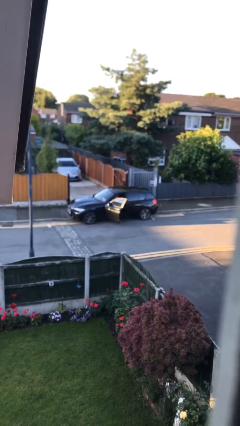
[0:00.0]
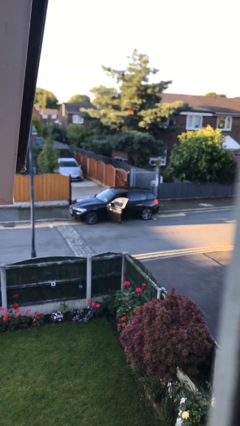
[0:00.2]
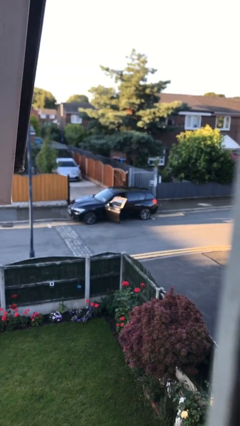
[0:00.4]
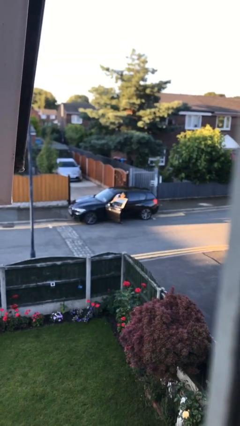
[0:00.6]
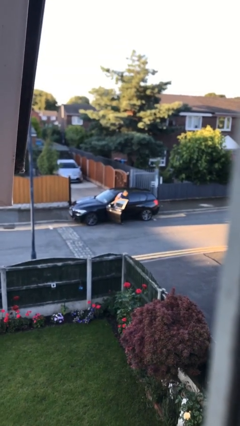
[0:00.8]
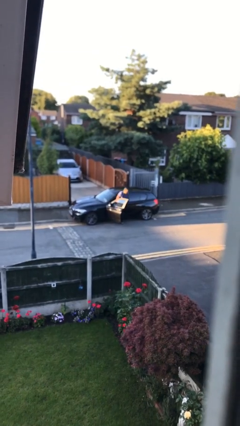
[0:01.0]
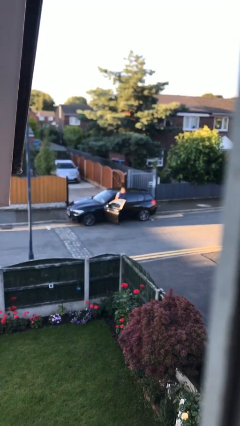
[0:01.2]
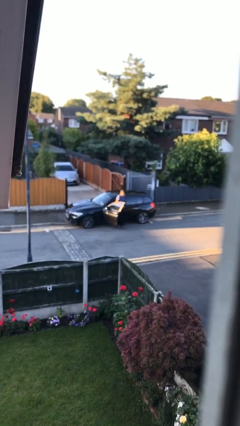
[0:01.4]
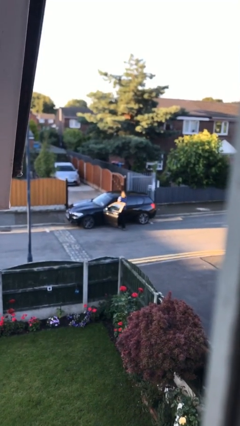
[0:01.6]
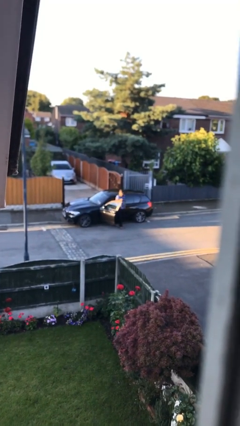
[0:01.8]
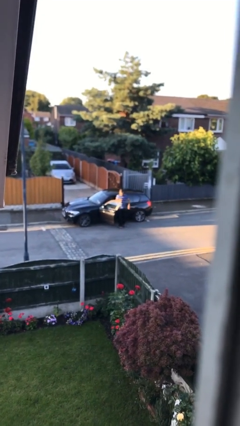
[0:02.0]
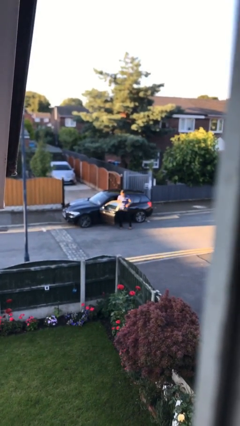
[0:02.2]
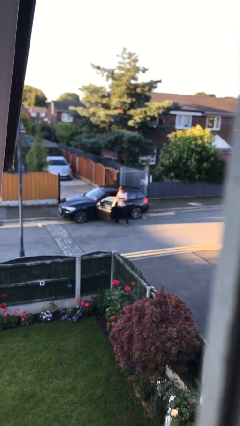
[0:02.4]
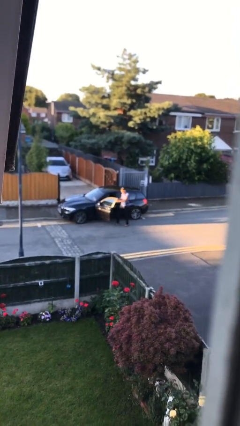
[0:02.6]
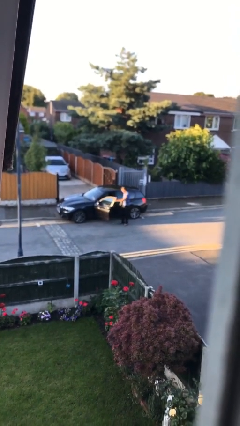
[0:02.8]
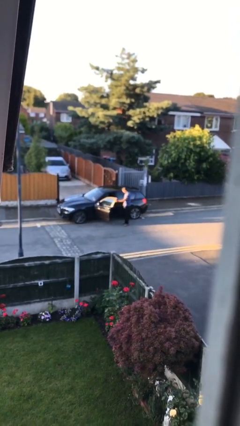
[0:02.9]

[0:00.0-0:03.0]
person exits car

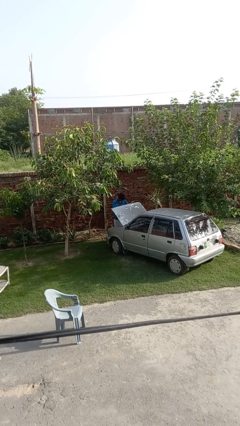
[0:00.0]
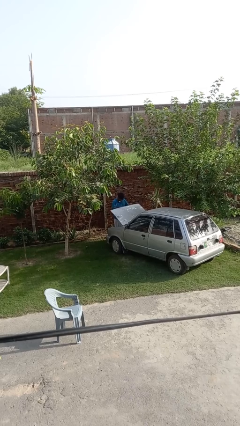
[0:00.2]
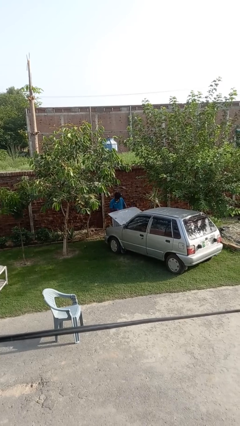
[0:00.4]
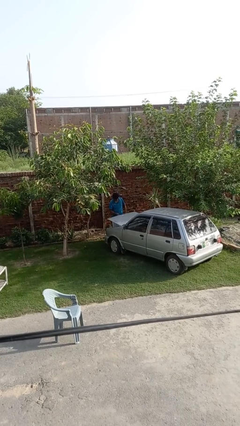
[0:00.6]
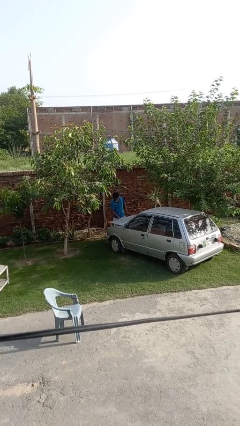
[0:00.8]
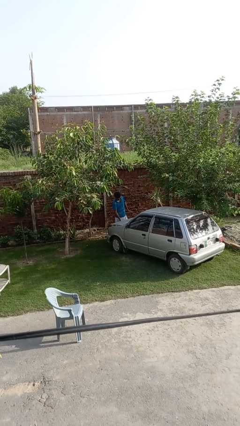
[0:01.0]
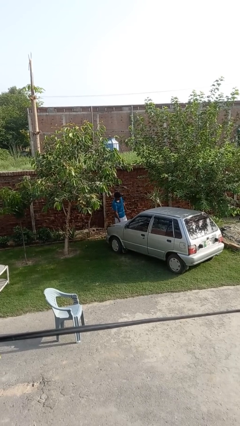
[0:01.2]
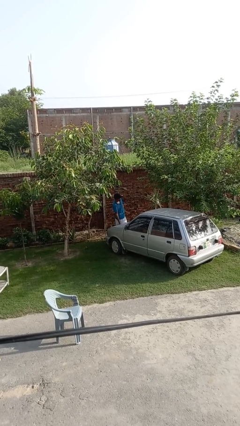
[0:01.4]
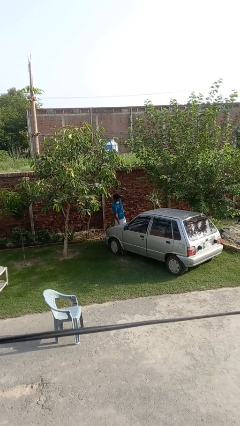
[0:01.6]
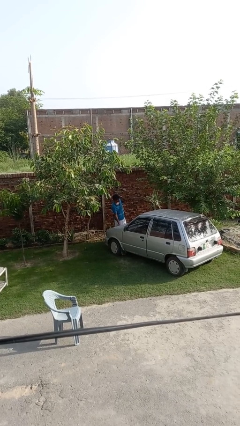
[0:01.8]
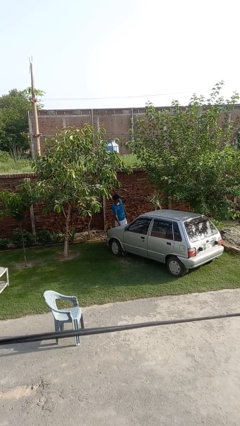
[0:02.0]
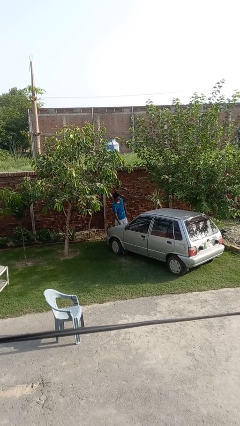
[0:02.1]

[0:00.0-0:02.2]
person closes car hood

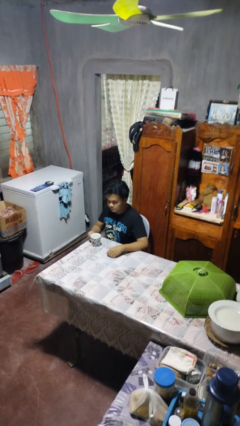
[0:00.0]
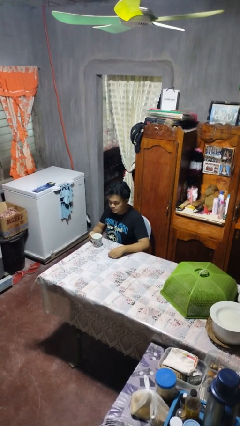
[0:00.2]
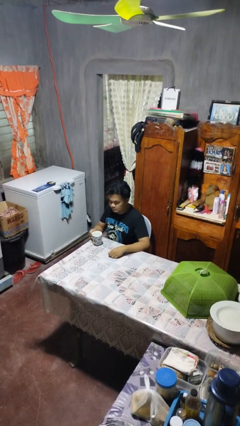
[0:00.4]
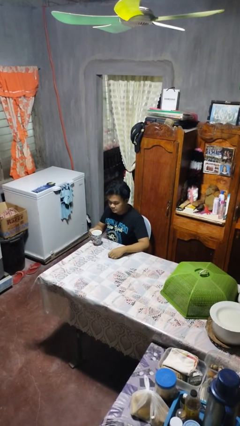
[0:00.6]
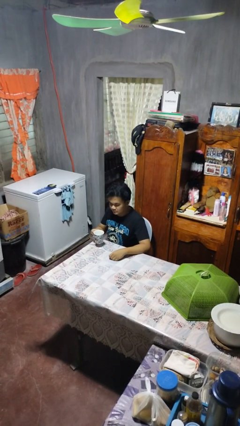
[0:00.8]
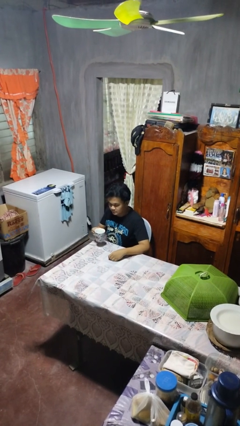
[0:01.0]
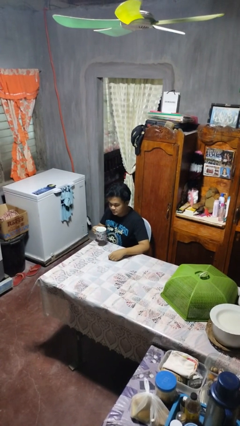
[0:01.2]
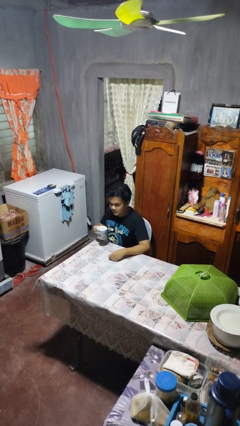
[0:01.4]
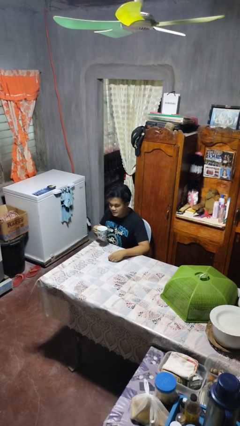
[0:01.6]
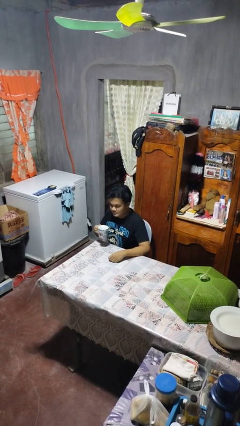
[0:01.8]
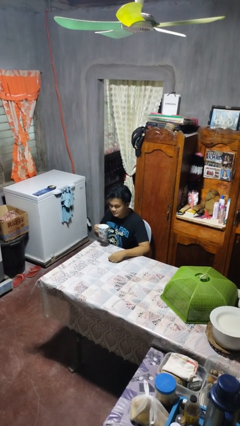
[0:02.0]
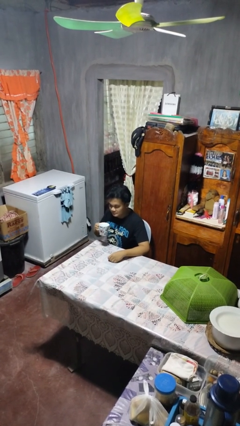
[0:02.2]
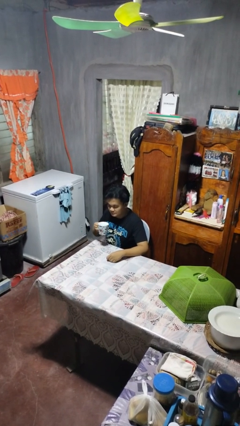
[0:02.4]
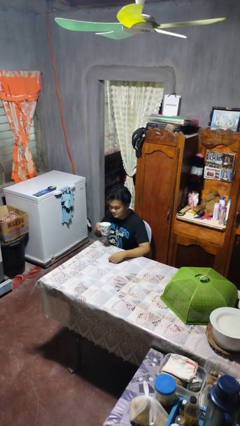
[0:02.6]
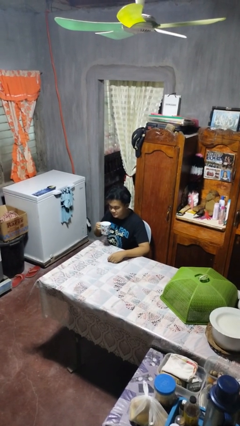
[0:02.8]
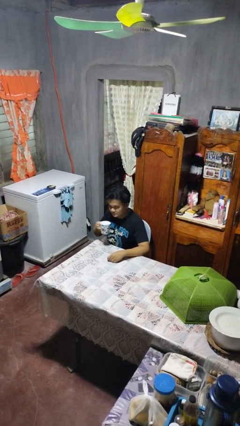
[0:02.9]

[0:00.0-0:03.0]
person picks up object from table

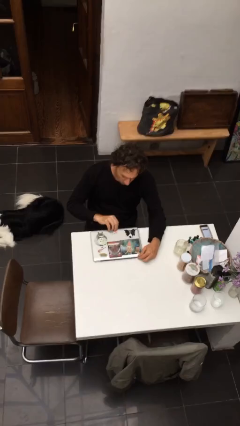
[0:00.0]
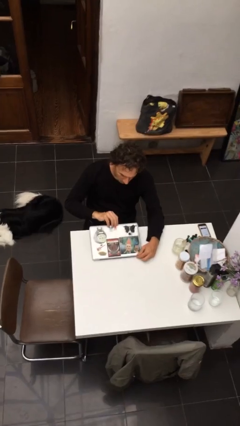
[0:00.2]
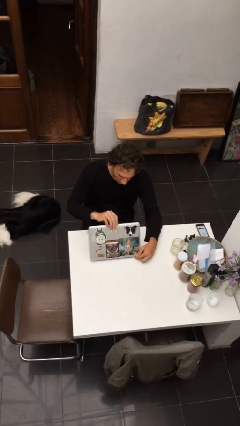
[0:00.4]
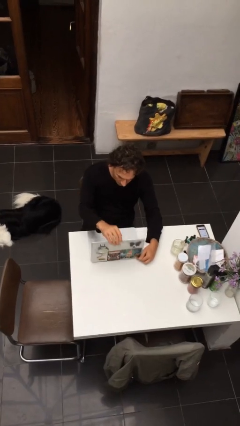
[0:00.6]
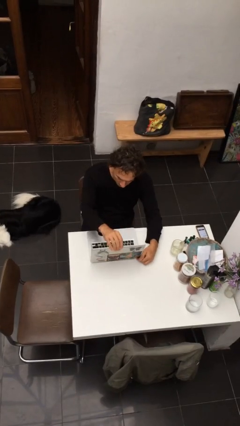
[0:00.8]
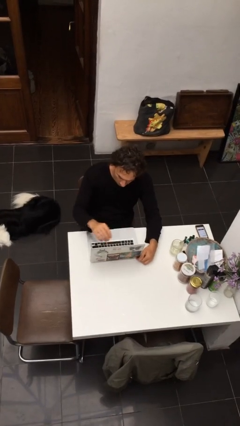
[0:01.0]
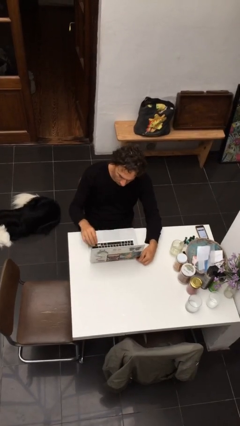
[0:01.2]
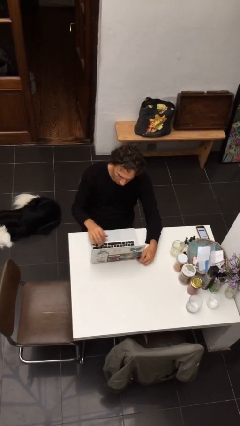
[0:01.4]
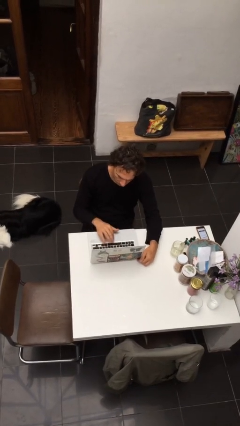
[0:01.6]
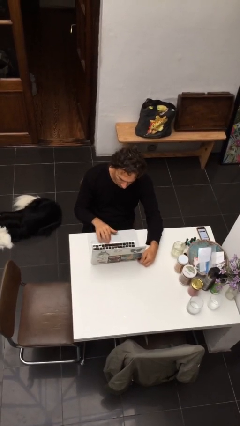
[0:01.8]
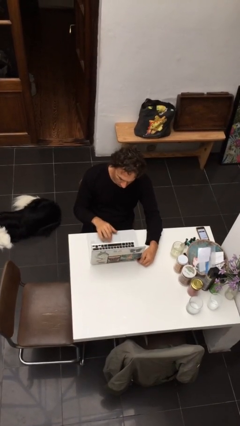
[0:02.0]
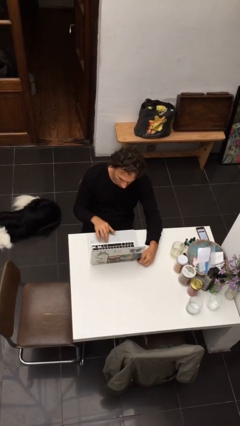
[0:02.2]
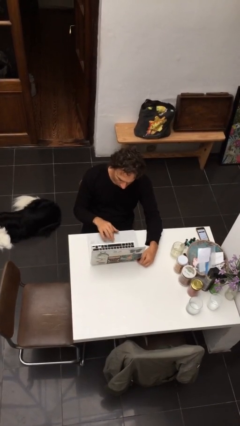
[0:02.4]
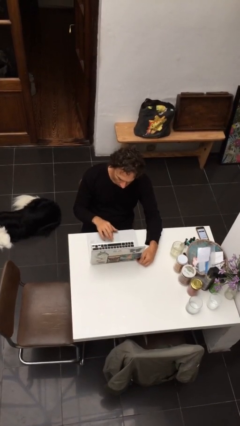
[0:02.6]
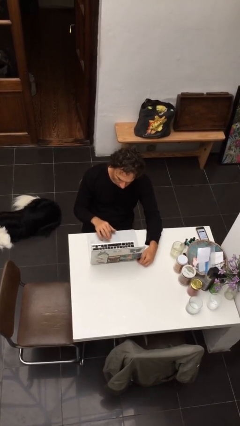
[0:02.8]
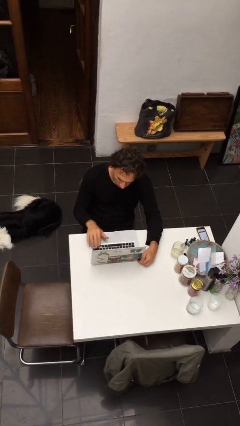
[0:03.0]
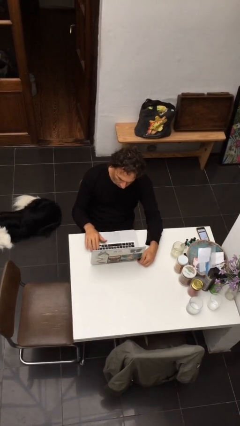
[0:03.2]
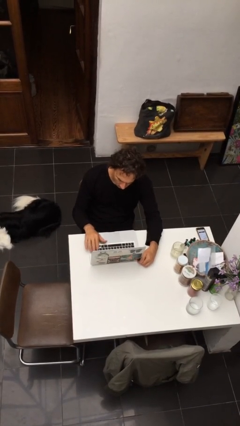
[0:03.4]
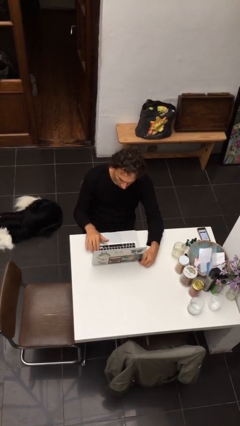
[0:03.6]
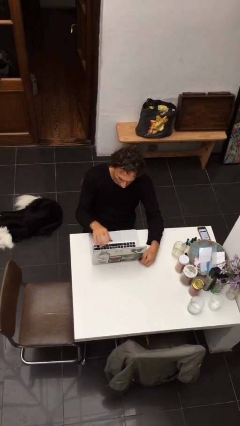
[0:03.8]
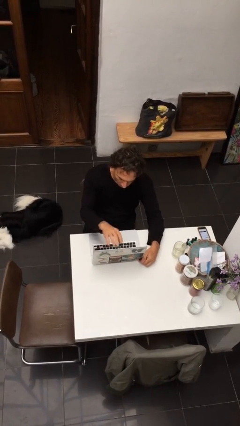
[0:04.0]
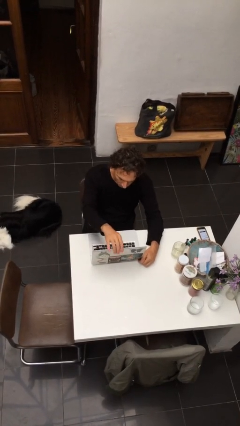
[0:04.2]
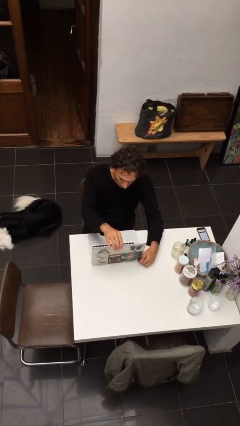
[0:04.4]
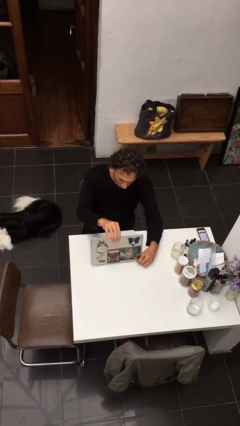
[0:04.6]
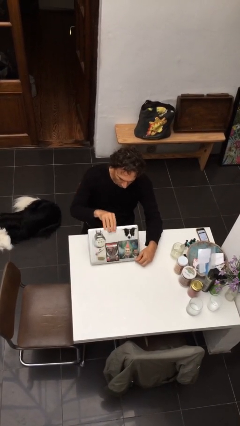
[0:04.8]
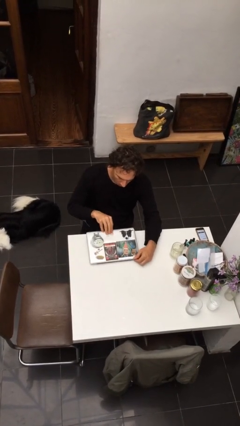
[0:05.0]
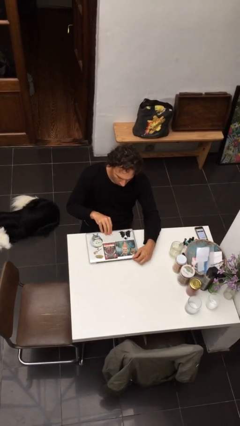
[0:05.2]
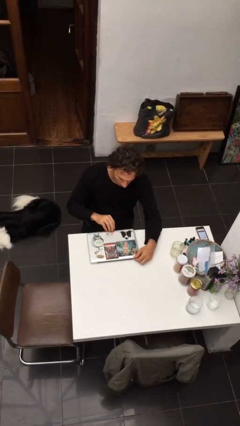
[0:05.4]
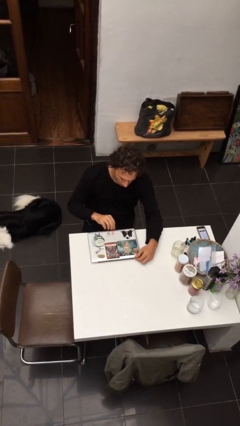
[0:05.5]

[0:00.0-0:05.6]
person interacts with laptop

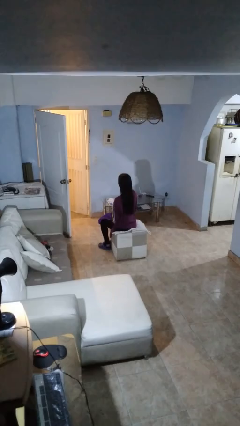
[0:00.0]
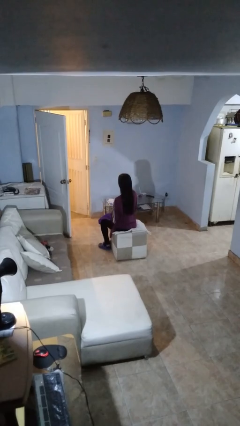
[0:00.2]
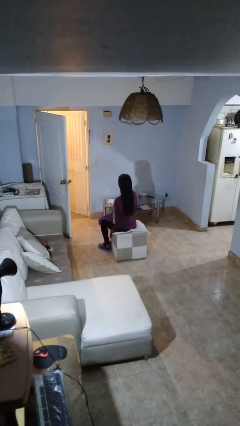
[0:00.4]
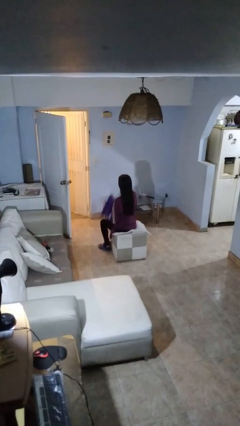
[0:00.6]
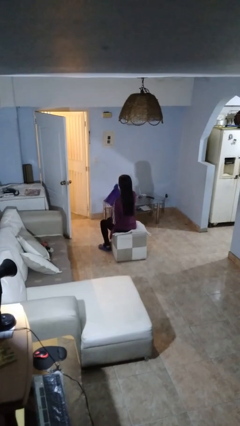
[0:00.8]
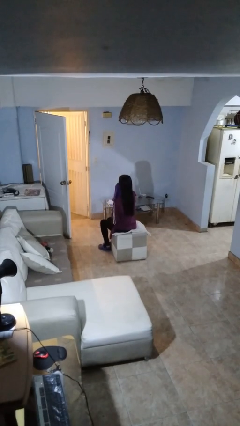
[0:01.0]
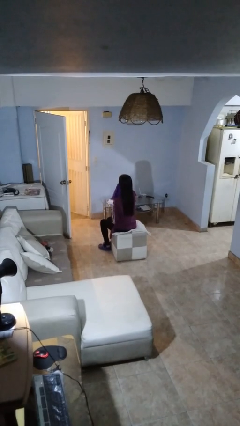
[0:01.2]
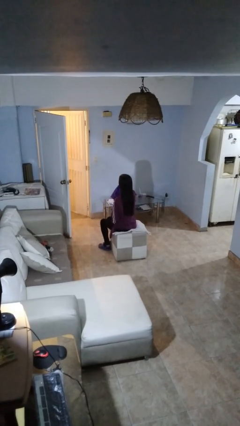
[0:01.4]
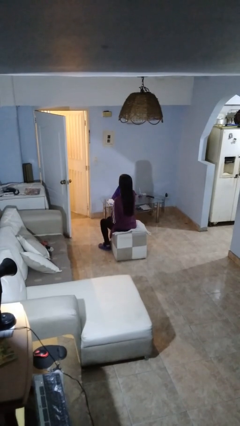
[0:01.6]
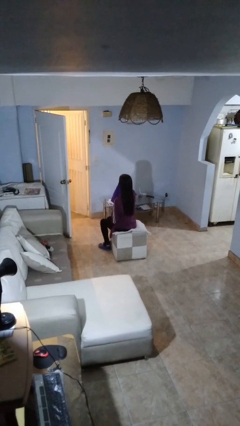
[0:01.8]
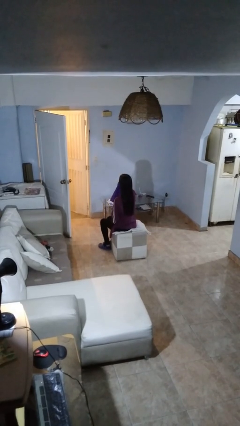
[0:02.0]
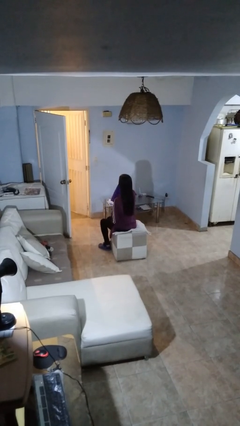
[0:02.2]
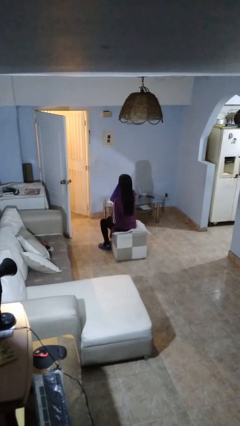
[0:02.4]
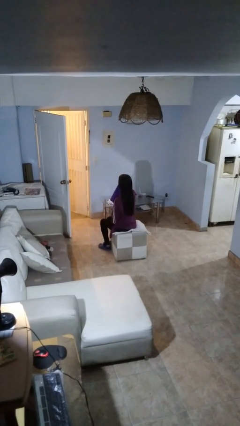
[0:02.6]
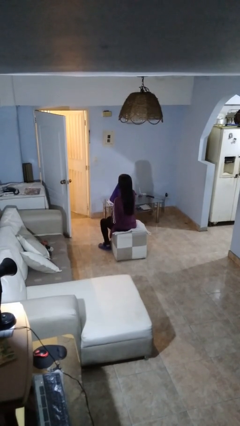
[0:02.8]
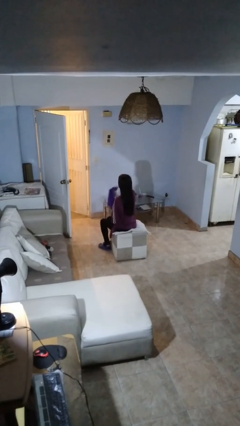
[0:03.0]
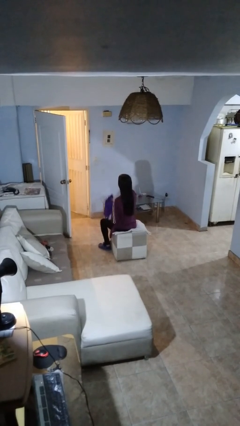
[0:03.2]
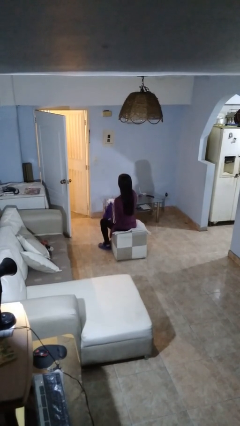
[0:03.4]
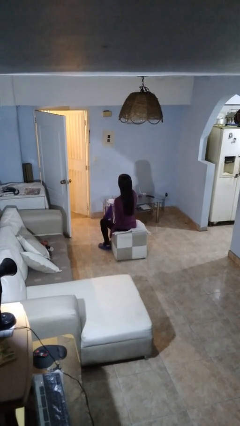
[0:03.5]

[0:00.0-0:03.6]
person wipes mouth with napkin

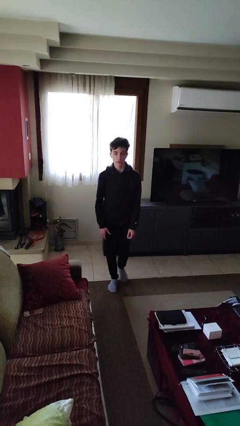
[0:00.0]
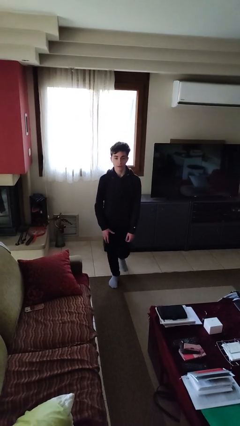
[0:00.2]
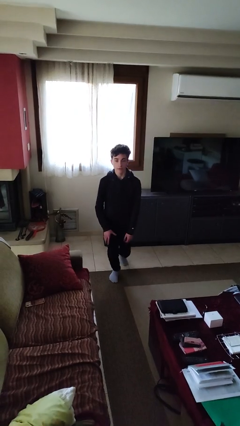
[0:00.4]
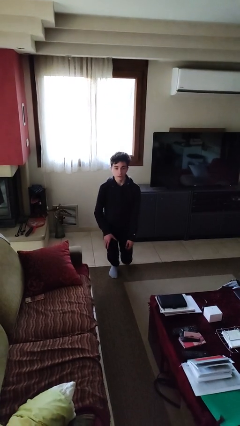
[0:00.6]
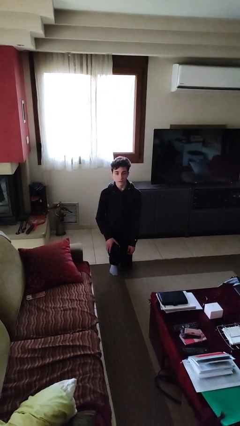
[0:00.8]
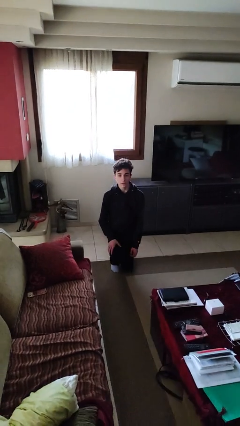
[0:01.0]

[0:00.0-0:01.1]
person kneels
